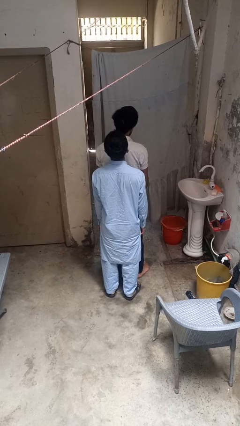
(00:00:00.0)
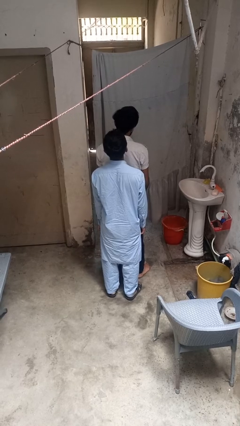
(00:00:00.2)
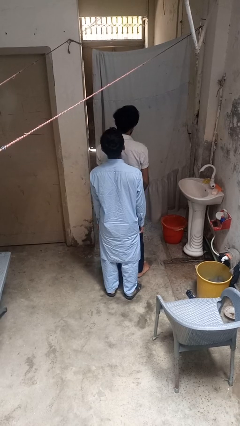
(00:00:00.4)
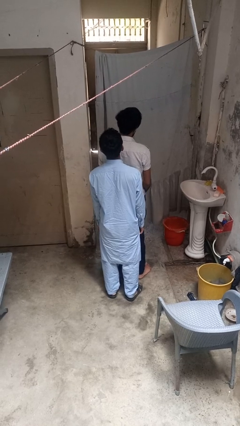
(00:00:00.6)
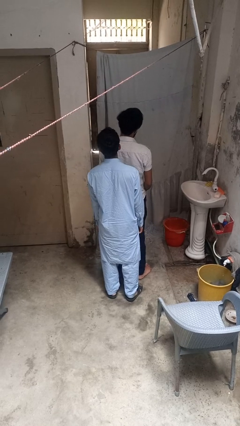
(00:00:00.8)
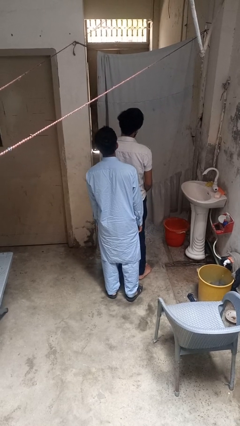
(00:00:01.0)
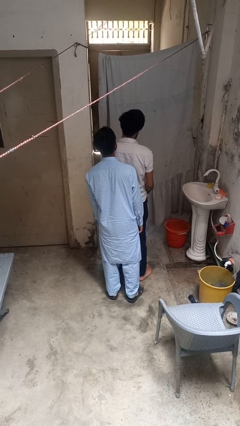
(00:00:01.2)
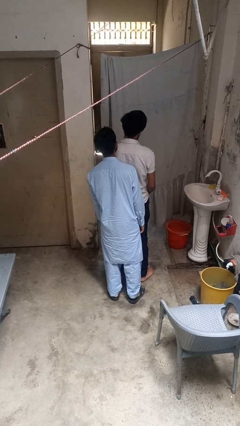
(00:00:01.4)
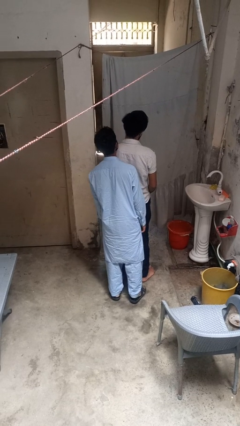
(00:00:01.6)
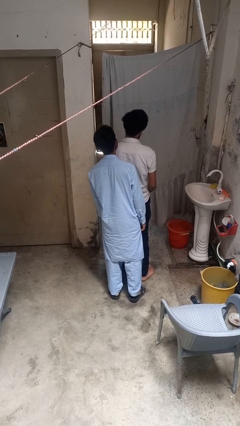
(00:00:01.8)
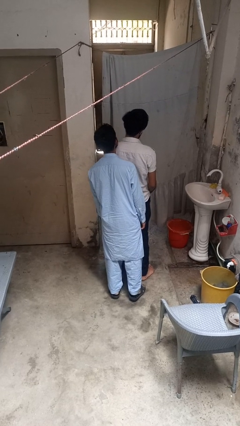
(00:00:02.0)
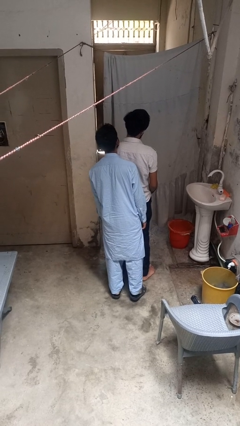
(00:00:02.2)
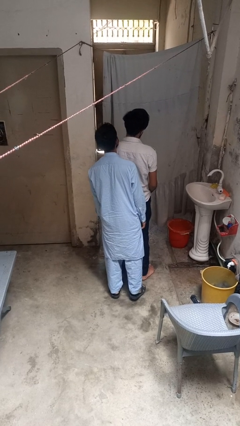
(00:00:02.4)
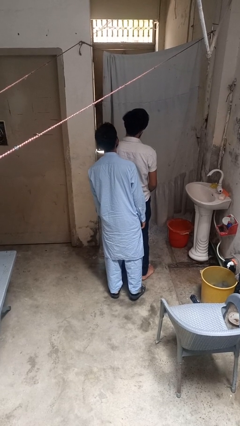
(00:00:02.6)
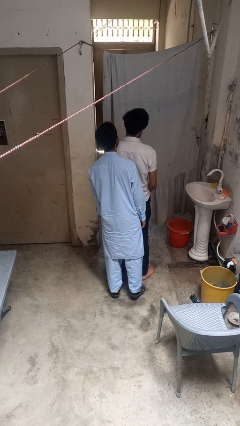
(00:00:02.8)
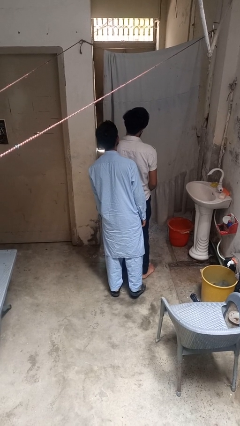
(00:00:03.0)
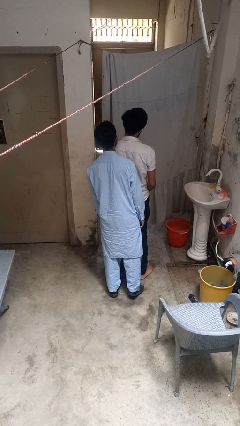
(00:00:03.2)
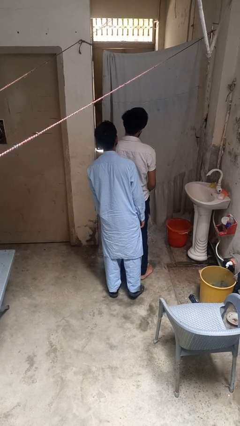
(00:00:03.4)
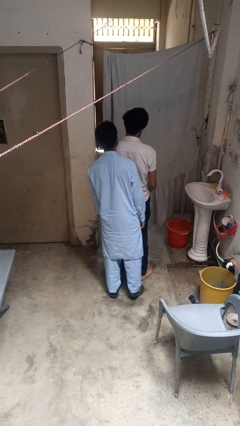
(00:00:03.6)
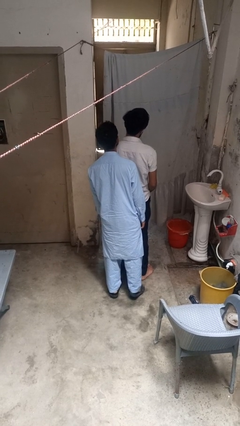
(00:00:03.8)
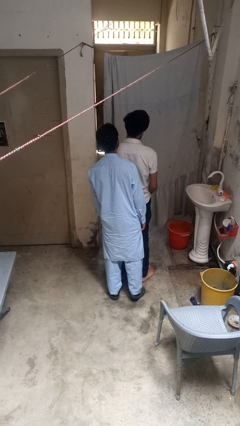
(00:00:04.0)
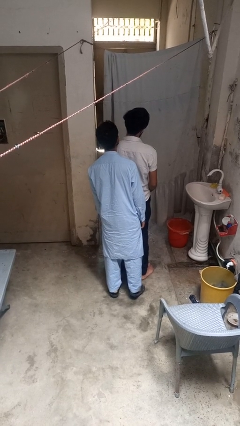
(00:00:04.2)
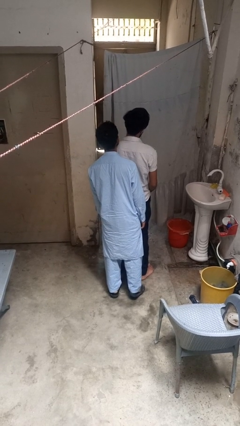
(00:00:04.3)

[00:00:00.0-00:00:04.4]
person looks over shoulder

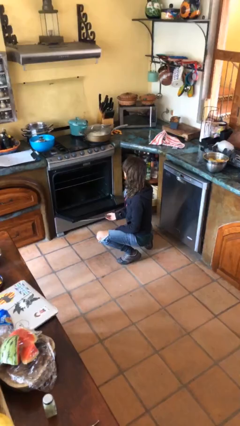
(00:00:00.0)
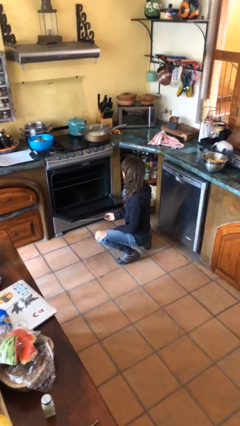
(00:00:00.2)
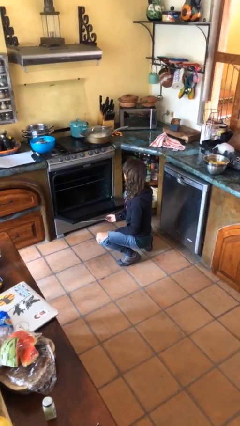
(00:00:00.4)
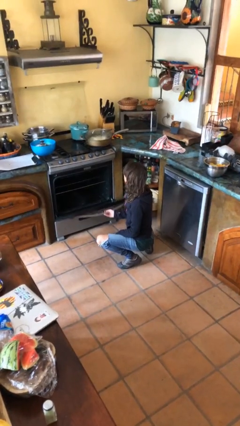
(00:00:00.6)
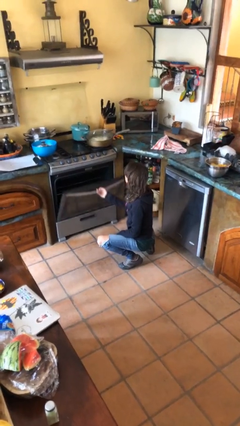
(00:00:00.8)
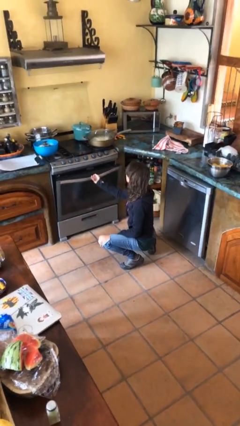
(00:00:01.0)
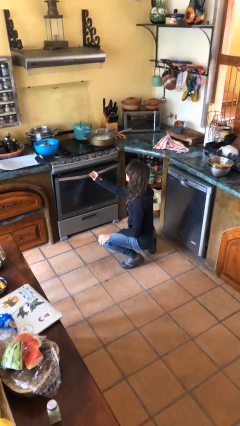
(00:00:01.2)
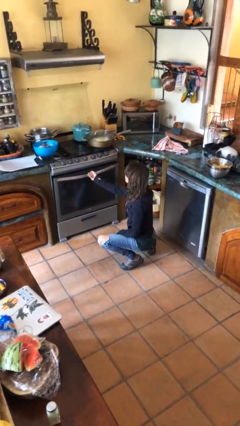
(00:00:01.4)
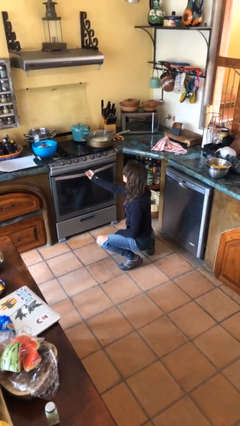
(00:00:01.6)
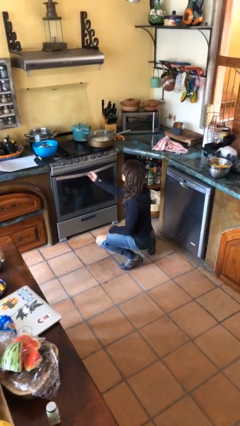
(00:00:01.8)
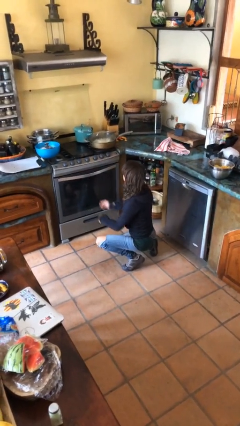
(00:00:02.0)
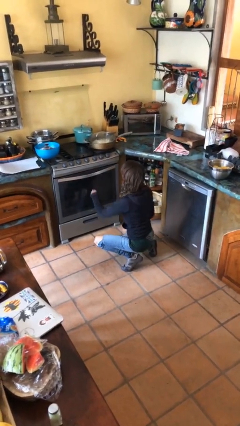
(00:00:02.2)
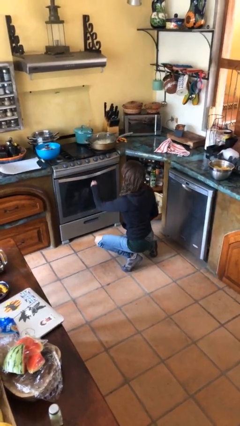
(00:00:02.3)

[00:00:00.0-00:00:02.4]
person closes oven door

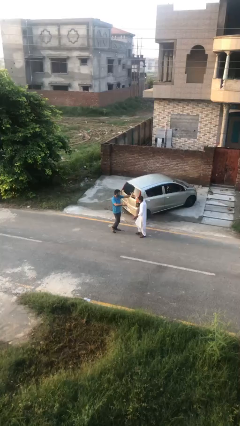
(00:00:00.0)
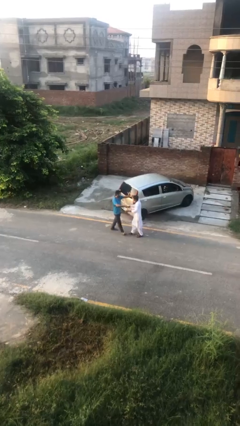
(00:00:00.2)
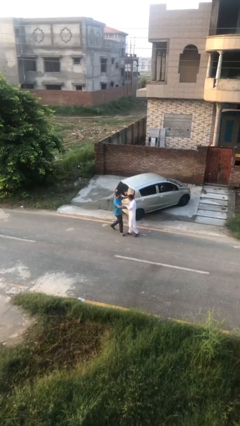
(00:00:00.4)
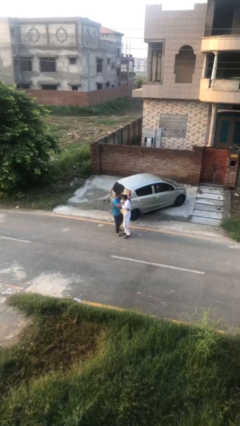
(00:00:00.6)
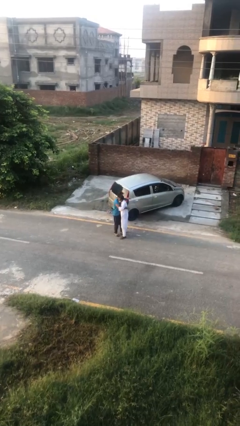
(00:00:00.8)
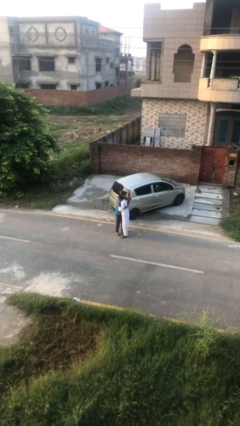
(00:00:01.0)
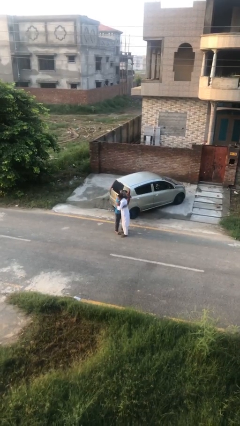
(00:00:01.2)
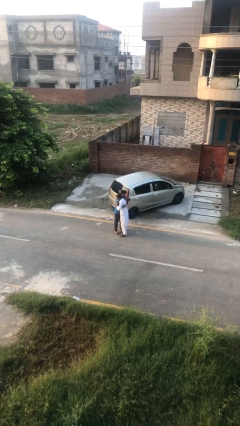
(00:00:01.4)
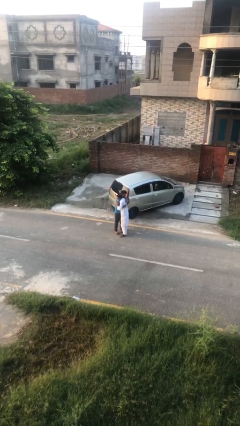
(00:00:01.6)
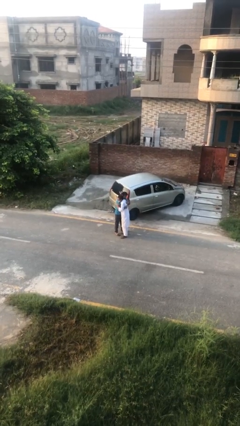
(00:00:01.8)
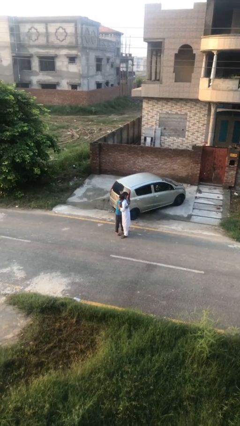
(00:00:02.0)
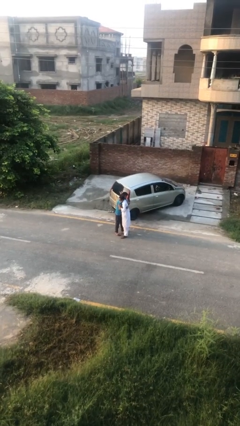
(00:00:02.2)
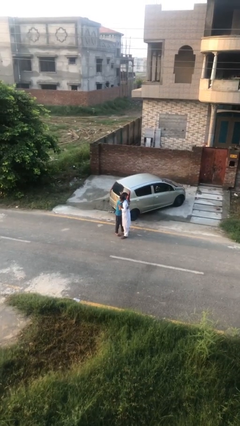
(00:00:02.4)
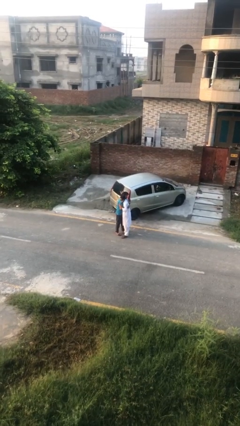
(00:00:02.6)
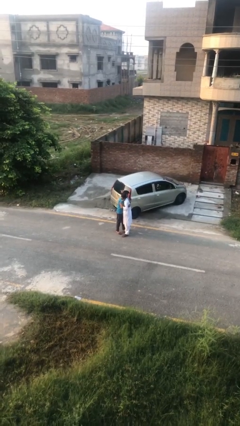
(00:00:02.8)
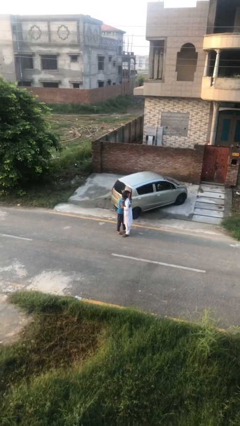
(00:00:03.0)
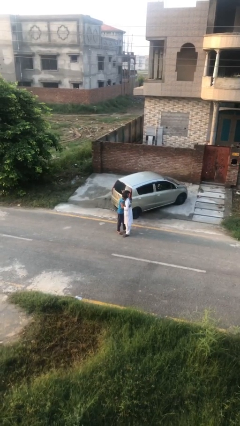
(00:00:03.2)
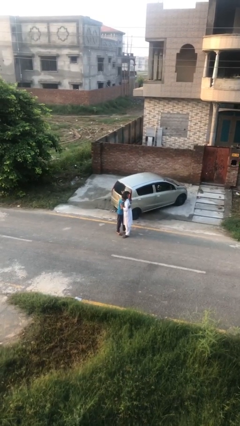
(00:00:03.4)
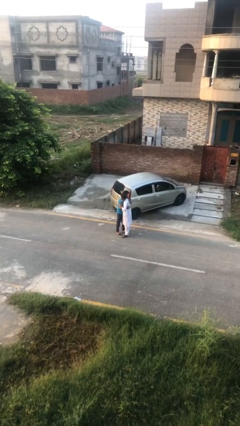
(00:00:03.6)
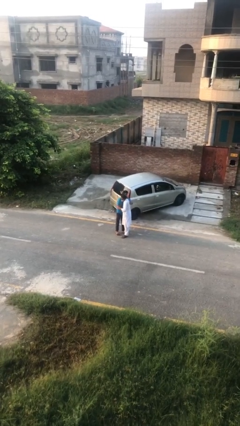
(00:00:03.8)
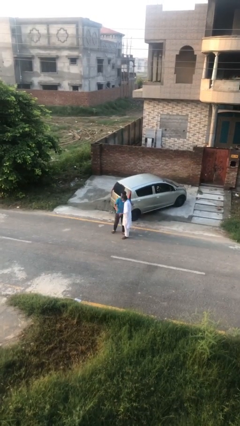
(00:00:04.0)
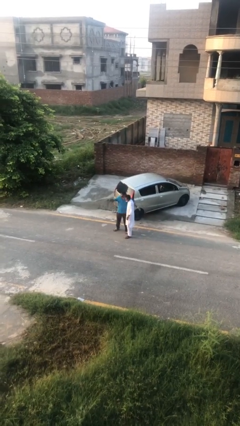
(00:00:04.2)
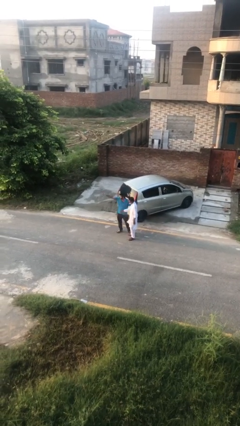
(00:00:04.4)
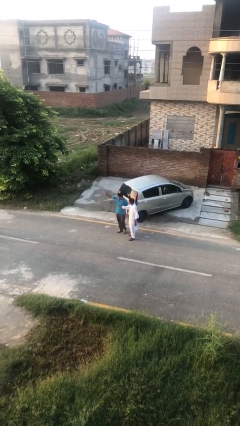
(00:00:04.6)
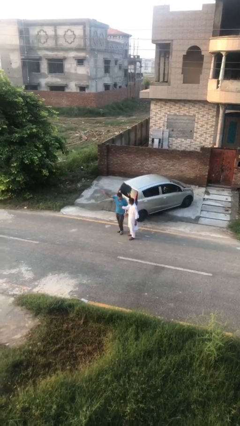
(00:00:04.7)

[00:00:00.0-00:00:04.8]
person embraces person

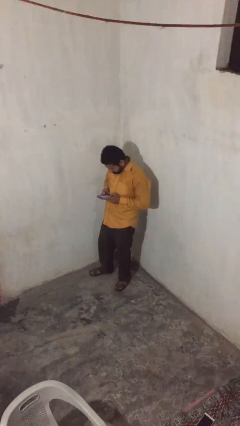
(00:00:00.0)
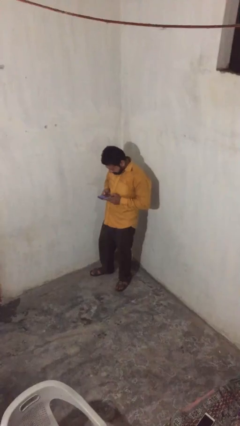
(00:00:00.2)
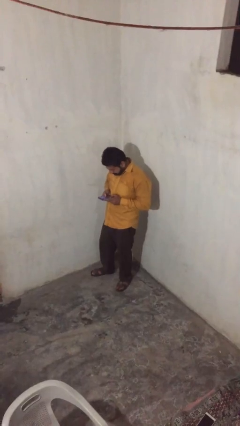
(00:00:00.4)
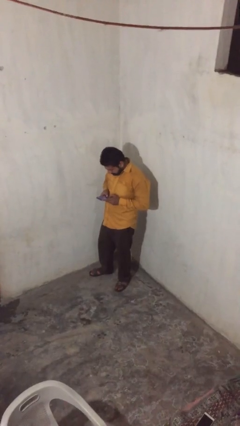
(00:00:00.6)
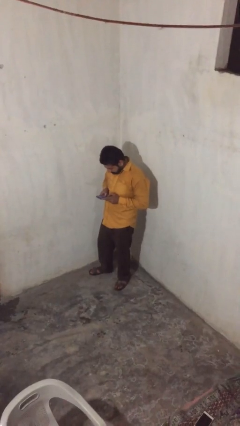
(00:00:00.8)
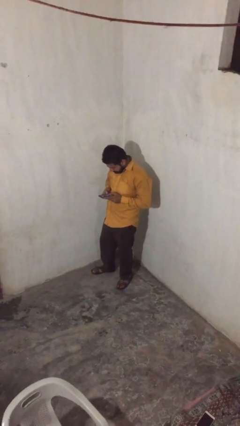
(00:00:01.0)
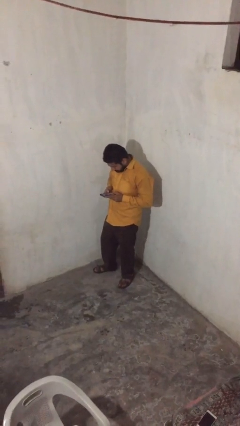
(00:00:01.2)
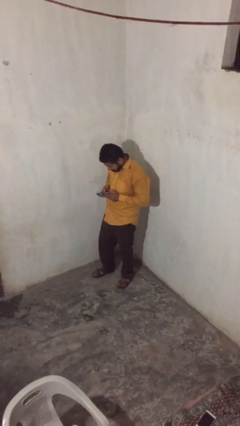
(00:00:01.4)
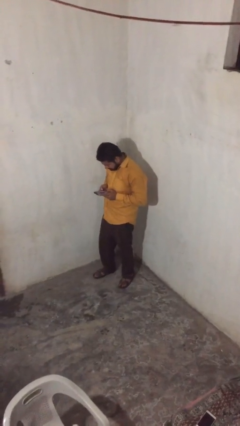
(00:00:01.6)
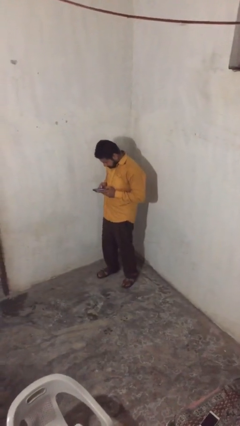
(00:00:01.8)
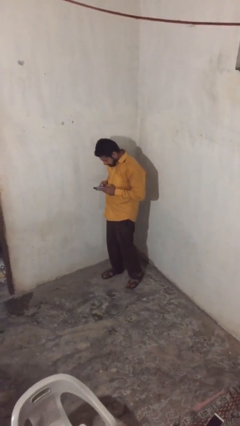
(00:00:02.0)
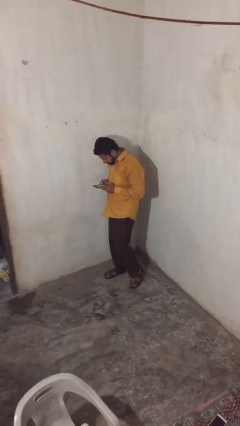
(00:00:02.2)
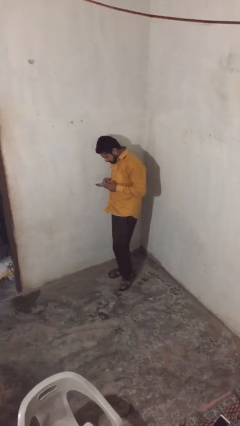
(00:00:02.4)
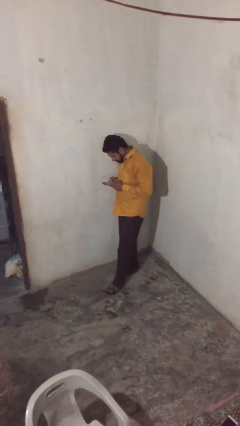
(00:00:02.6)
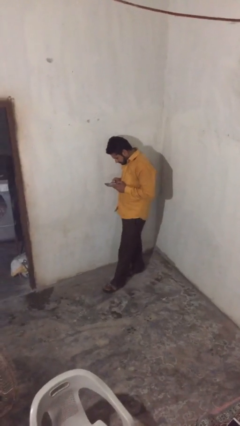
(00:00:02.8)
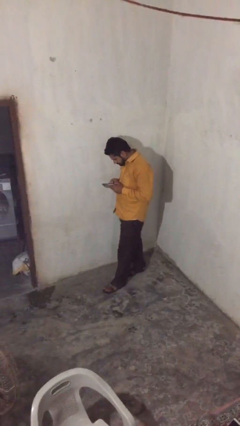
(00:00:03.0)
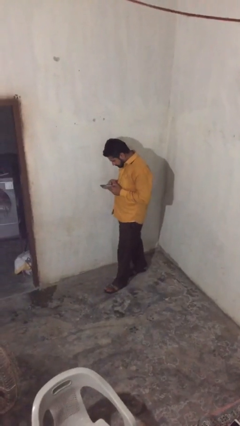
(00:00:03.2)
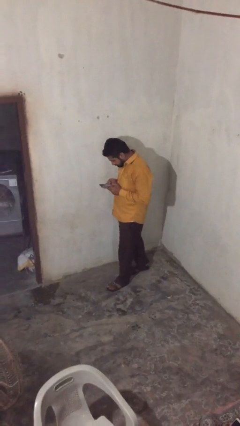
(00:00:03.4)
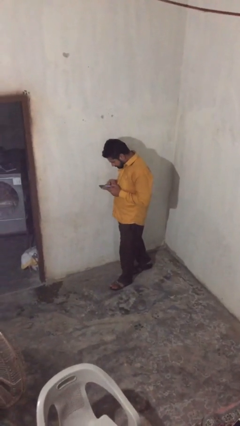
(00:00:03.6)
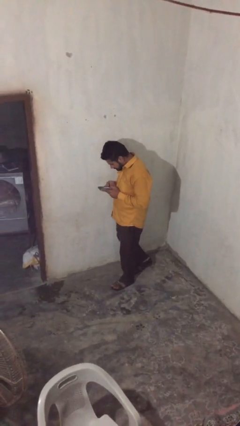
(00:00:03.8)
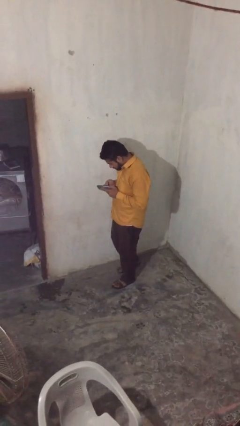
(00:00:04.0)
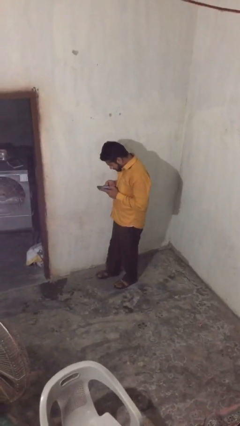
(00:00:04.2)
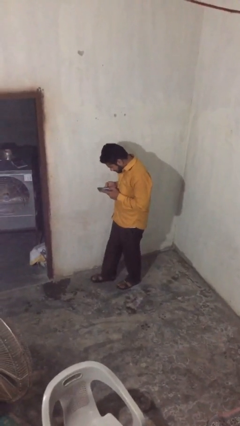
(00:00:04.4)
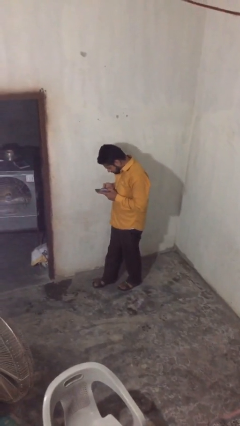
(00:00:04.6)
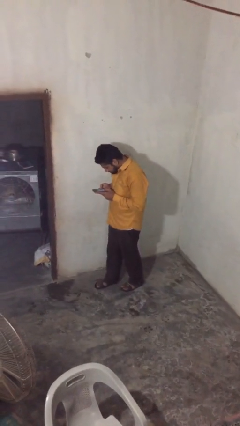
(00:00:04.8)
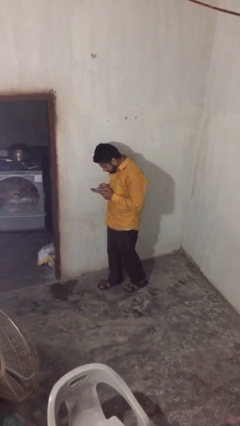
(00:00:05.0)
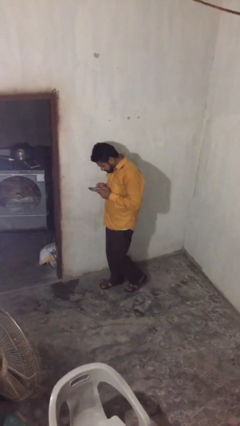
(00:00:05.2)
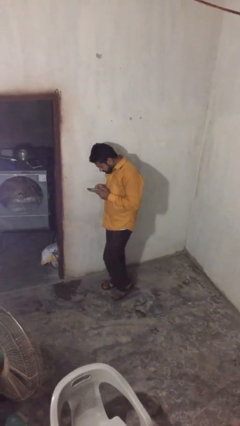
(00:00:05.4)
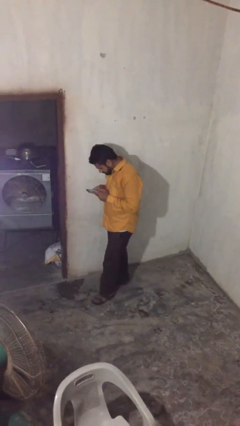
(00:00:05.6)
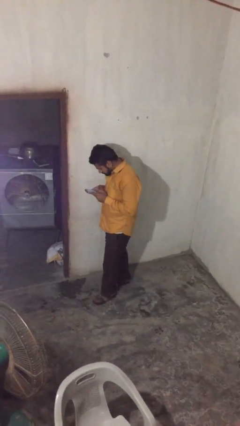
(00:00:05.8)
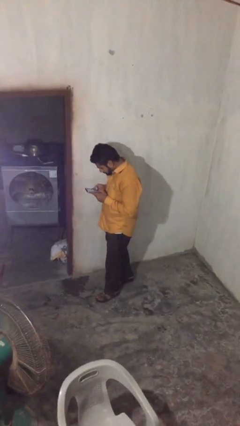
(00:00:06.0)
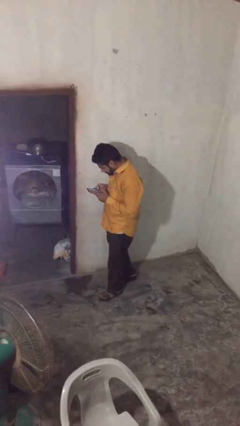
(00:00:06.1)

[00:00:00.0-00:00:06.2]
person texts on phone
